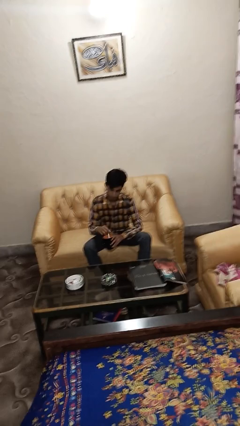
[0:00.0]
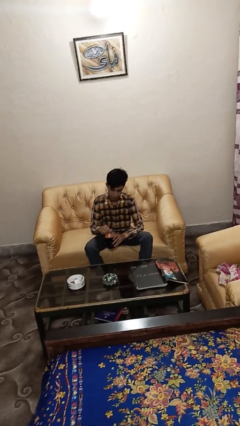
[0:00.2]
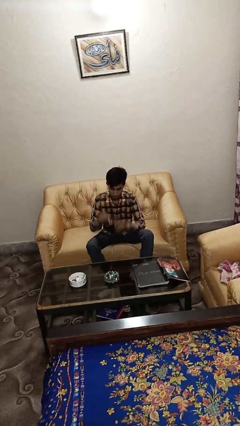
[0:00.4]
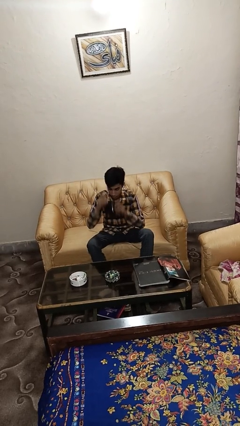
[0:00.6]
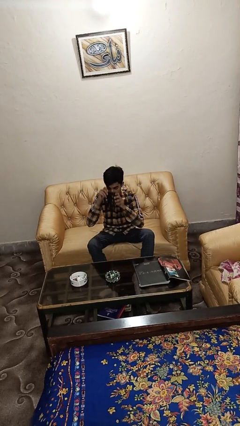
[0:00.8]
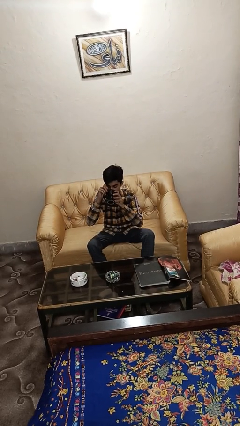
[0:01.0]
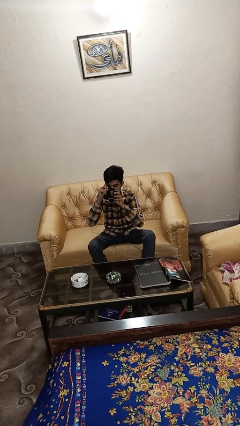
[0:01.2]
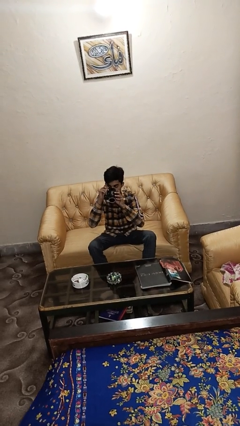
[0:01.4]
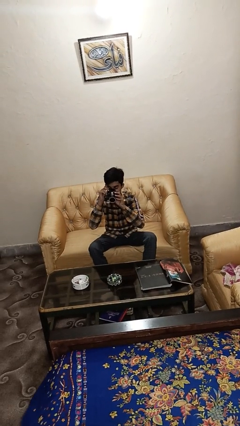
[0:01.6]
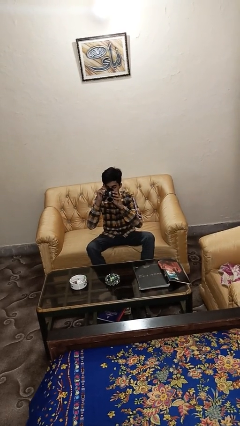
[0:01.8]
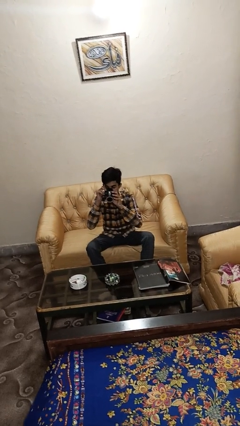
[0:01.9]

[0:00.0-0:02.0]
person drinks from mug

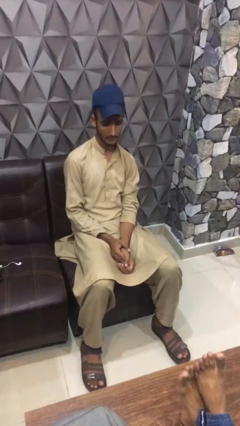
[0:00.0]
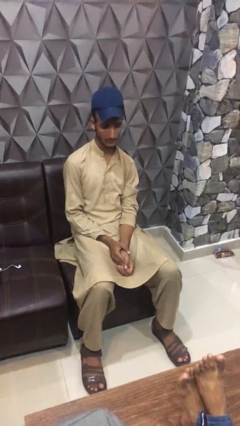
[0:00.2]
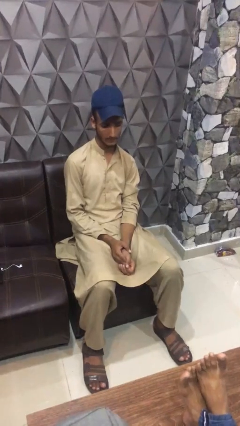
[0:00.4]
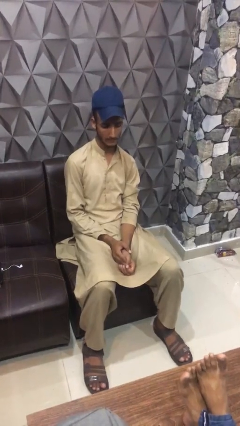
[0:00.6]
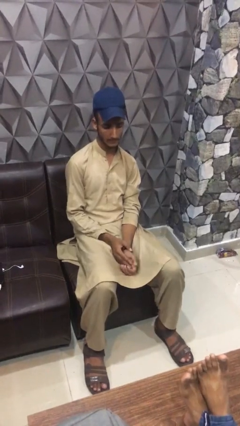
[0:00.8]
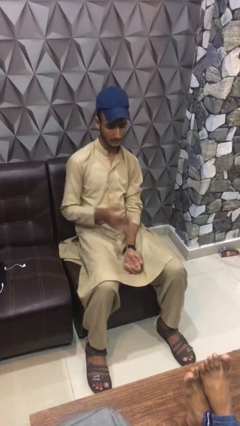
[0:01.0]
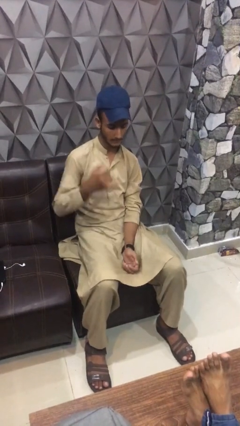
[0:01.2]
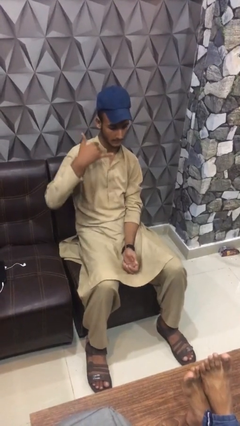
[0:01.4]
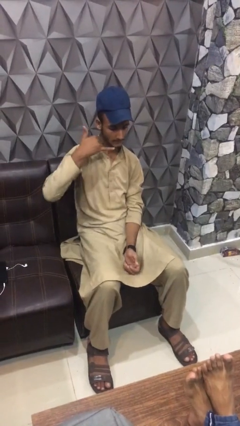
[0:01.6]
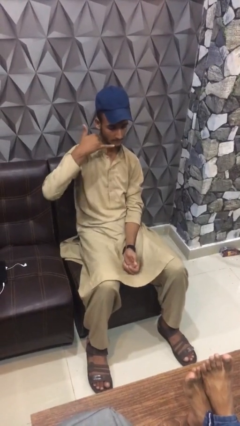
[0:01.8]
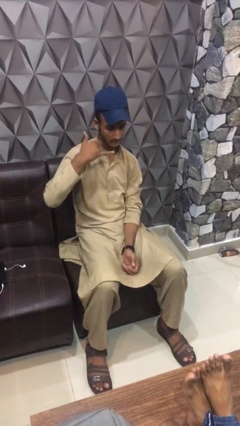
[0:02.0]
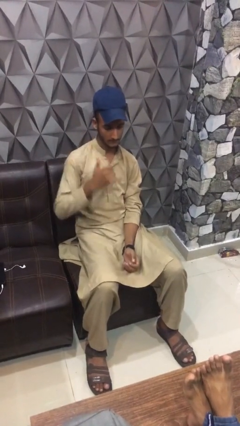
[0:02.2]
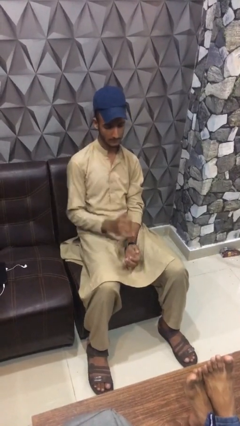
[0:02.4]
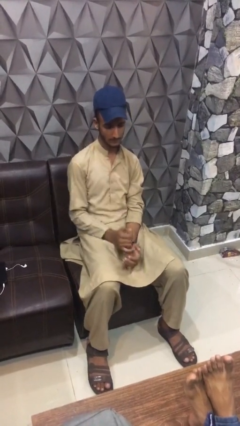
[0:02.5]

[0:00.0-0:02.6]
person gestures call me

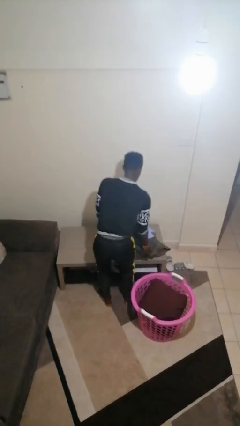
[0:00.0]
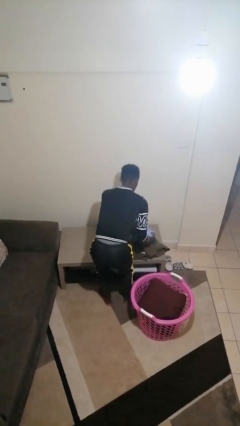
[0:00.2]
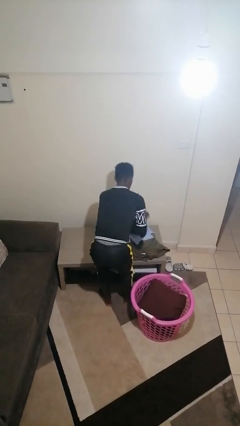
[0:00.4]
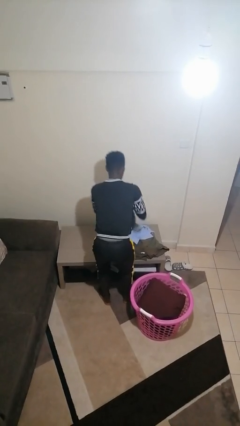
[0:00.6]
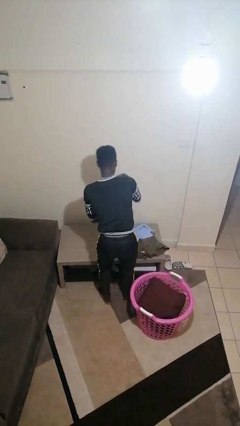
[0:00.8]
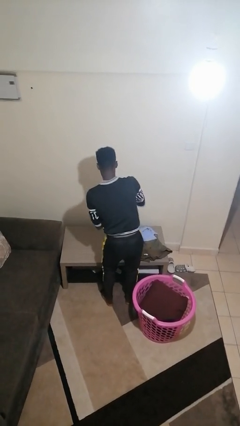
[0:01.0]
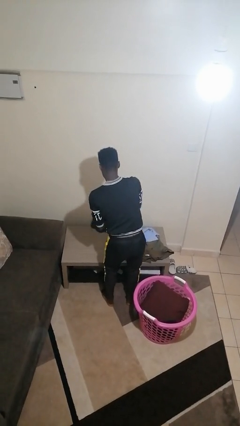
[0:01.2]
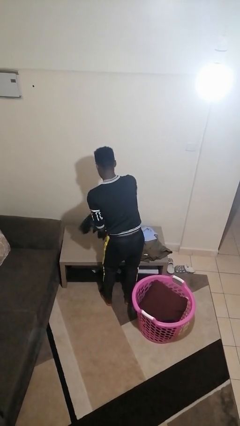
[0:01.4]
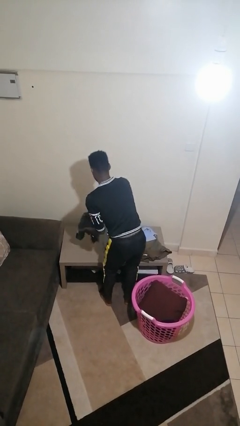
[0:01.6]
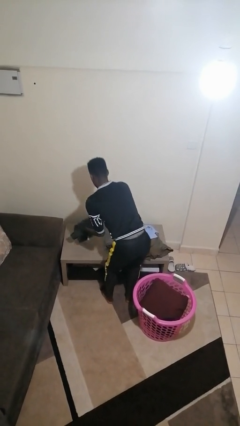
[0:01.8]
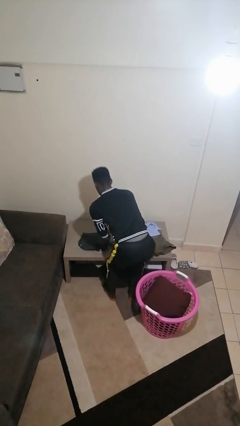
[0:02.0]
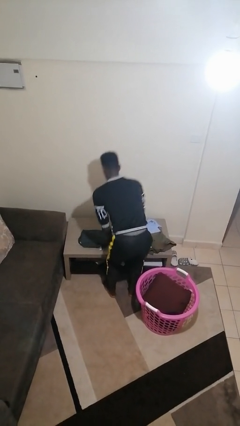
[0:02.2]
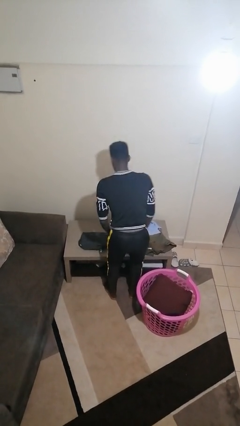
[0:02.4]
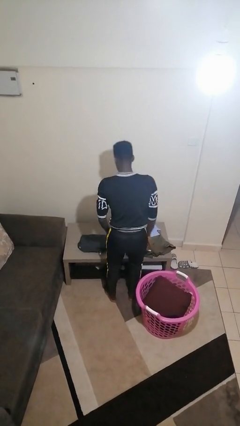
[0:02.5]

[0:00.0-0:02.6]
person folds pants

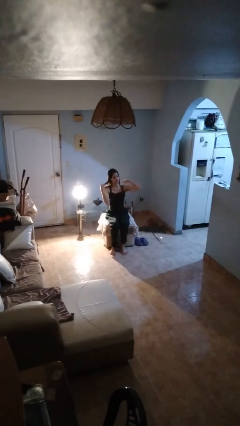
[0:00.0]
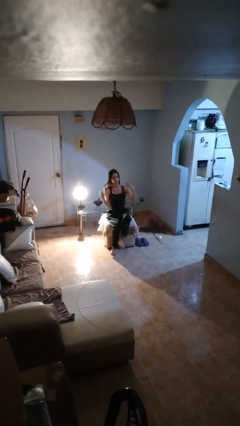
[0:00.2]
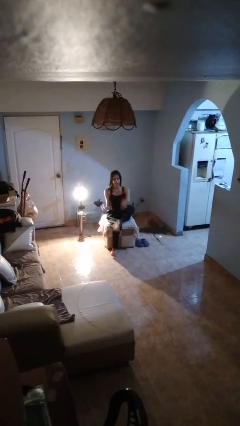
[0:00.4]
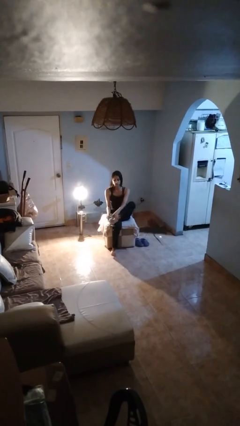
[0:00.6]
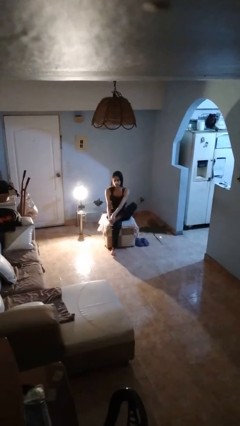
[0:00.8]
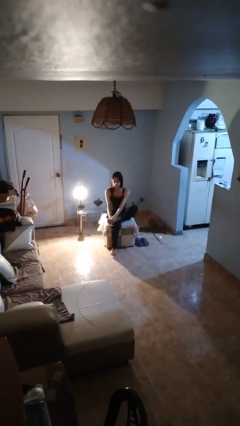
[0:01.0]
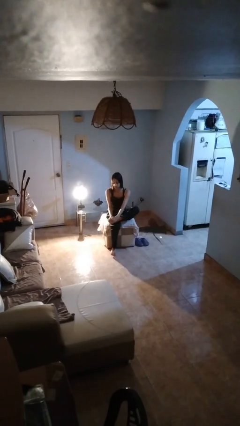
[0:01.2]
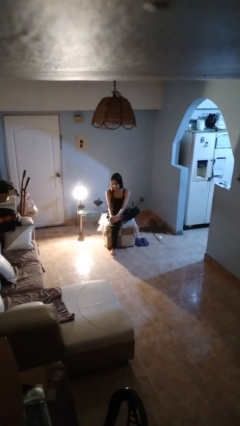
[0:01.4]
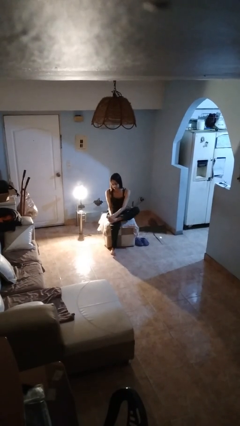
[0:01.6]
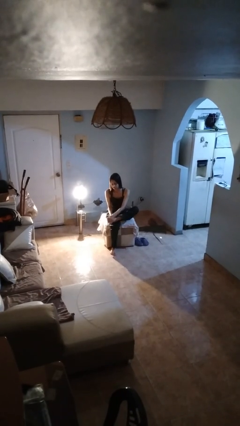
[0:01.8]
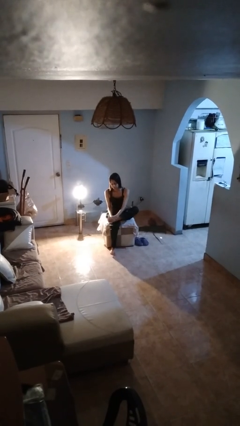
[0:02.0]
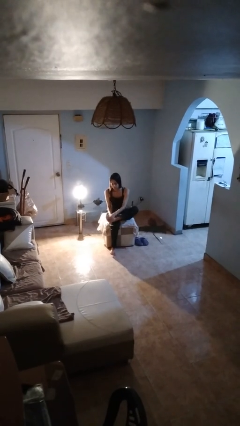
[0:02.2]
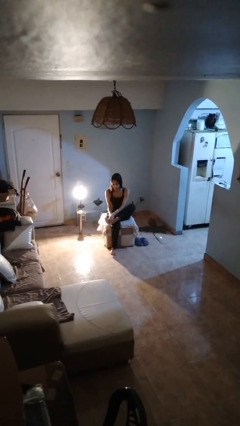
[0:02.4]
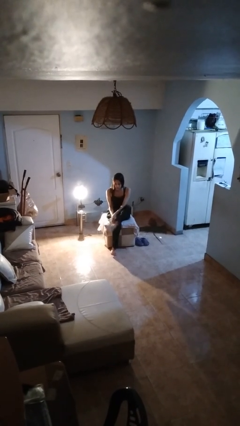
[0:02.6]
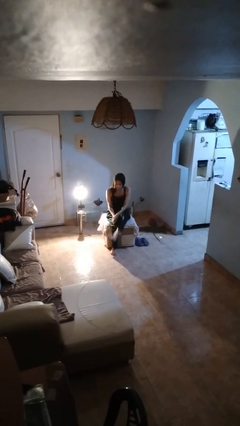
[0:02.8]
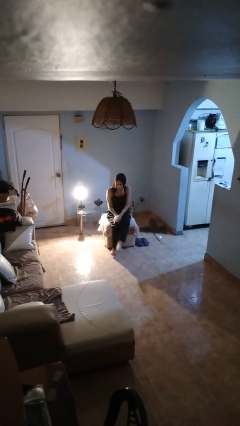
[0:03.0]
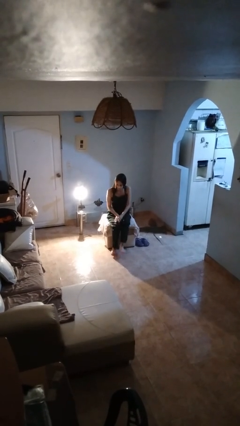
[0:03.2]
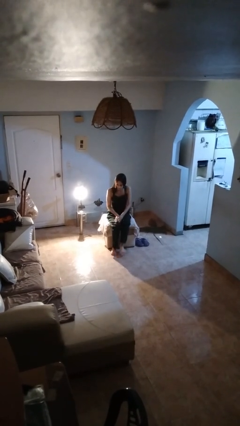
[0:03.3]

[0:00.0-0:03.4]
person rubs foot

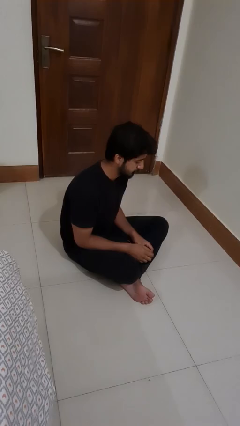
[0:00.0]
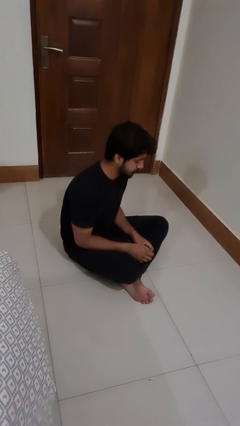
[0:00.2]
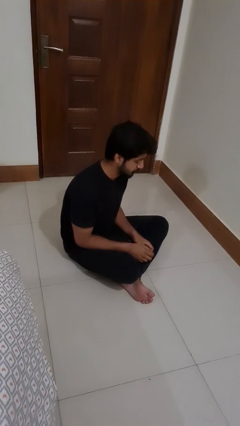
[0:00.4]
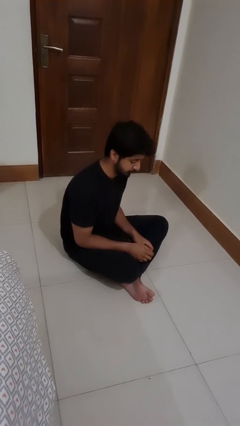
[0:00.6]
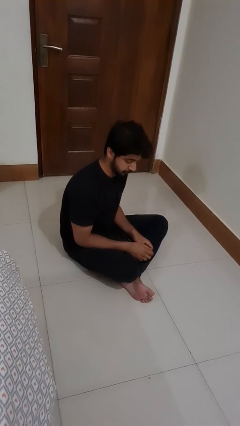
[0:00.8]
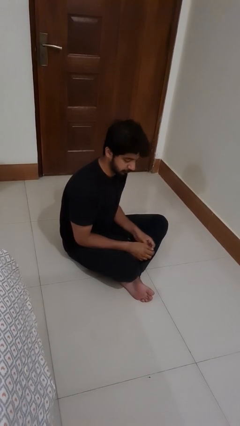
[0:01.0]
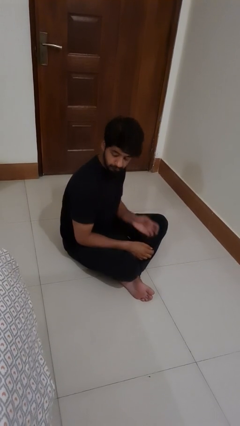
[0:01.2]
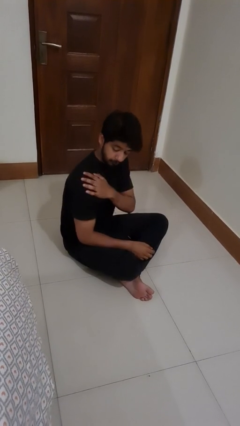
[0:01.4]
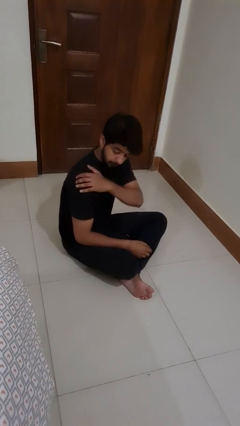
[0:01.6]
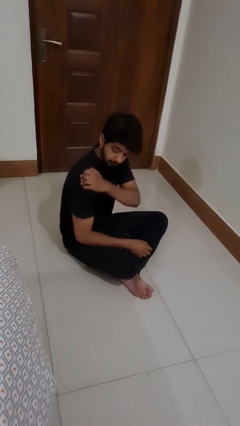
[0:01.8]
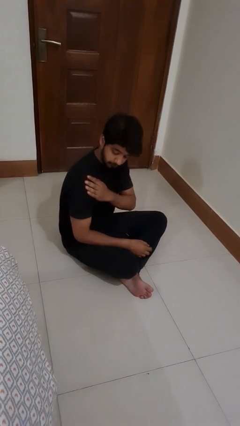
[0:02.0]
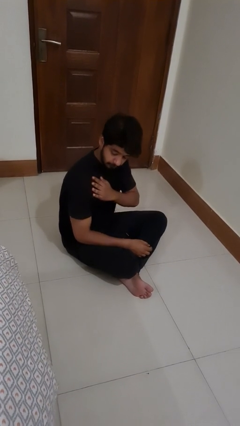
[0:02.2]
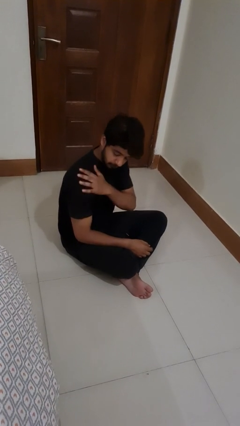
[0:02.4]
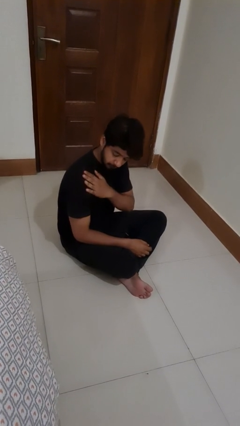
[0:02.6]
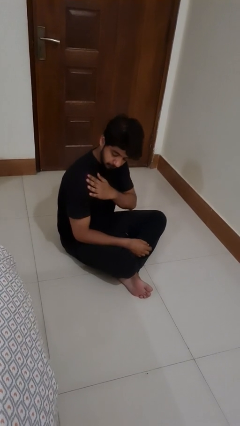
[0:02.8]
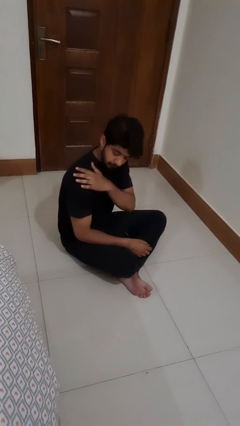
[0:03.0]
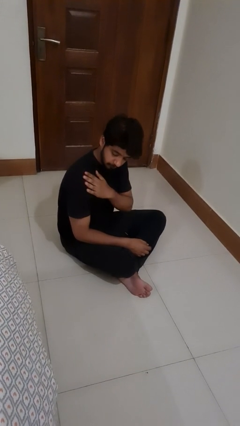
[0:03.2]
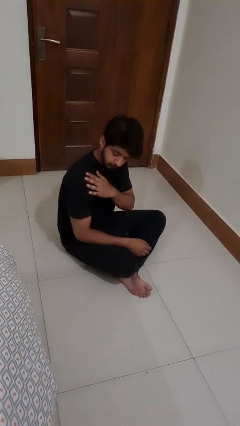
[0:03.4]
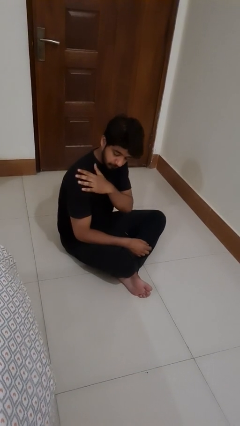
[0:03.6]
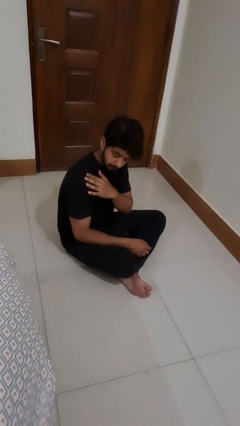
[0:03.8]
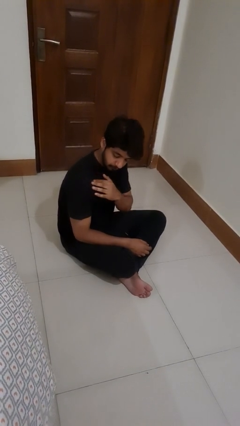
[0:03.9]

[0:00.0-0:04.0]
person swats bug

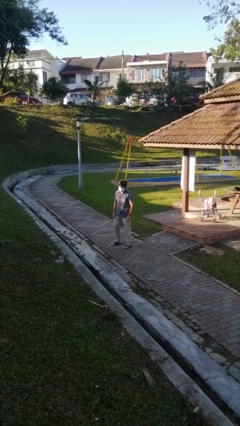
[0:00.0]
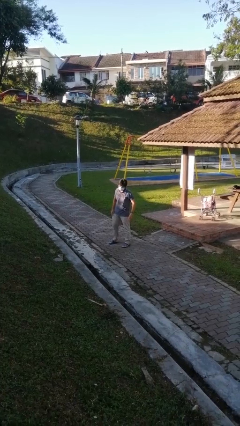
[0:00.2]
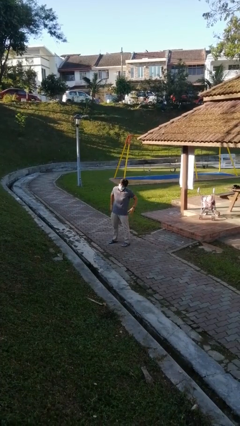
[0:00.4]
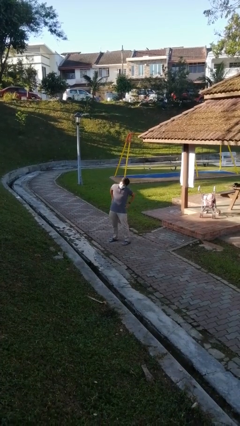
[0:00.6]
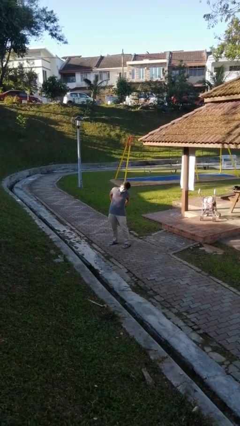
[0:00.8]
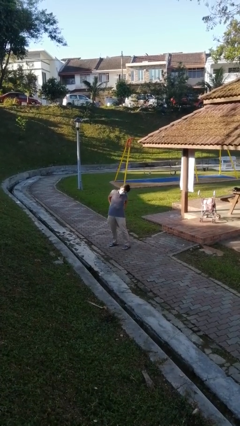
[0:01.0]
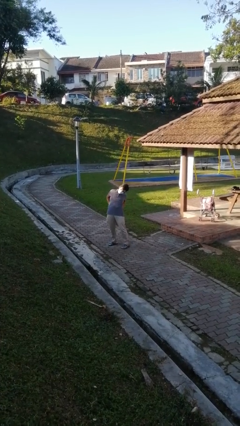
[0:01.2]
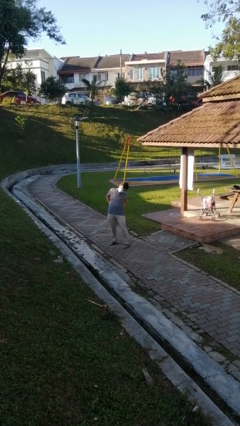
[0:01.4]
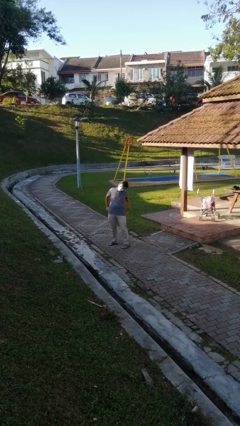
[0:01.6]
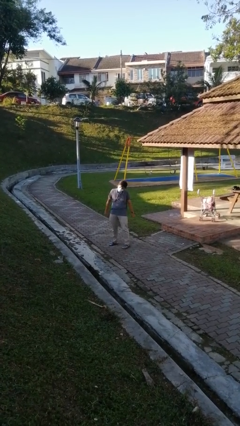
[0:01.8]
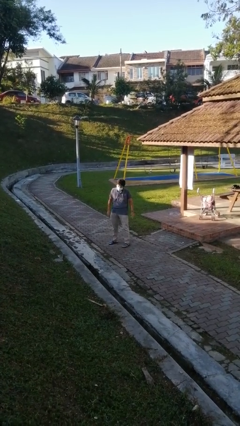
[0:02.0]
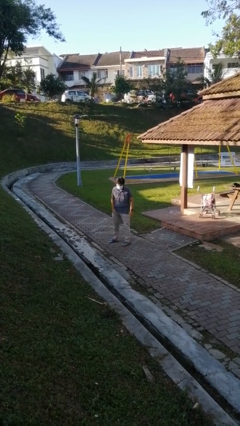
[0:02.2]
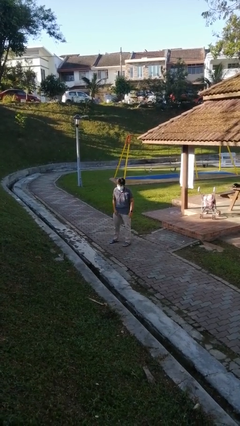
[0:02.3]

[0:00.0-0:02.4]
person stretches back
